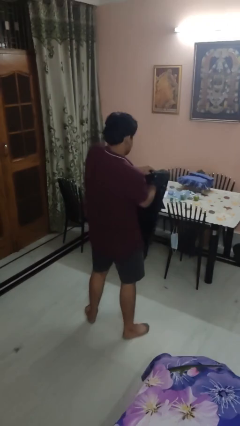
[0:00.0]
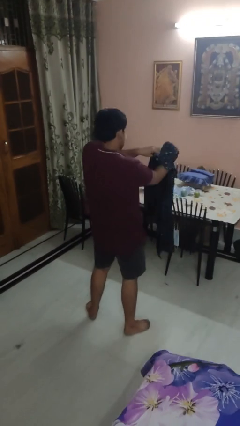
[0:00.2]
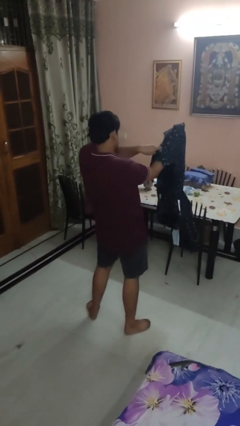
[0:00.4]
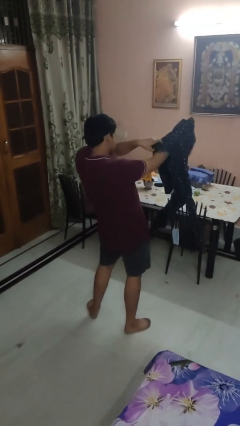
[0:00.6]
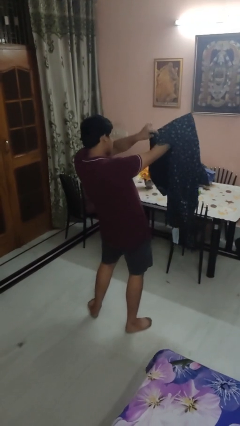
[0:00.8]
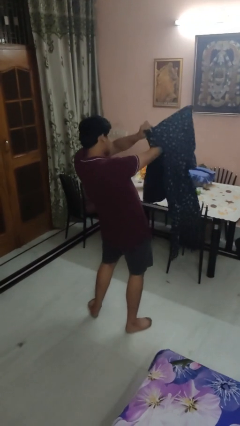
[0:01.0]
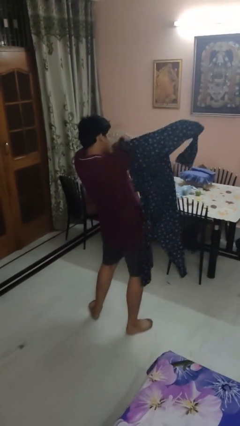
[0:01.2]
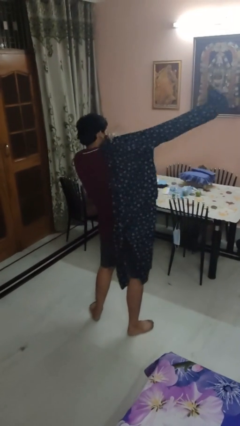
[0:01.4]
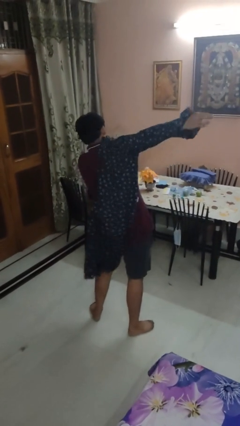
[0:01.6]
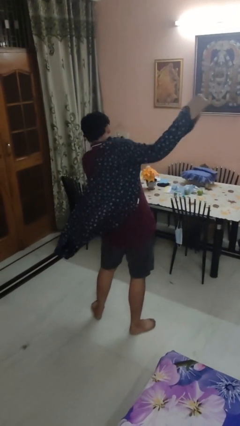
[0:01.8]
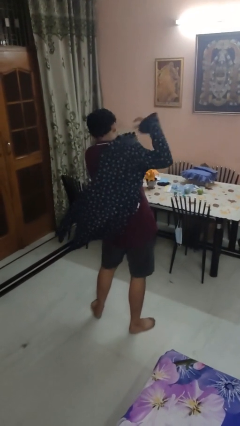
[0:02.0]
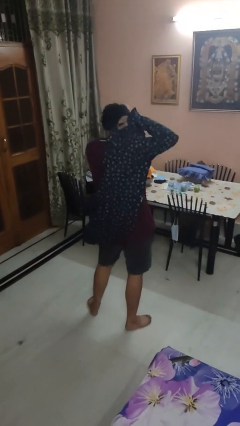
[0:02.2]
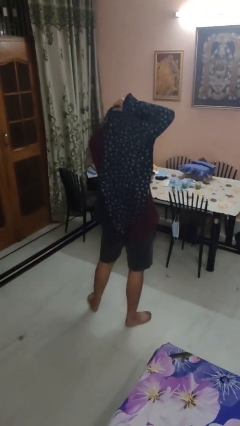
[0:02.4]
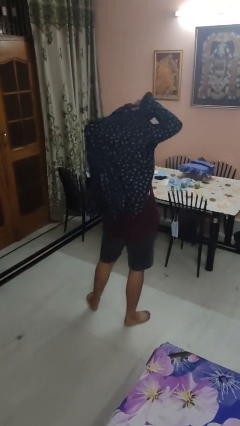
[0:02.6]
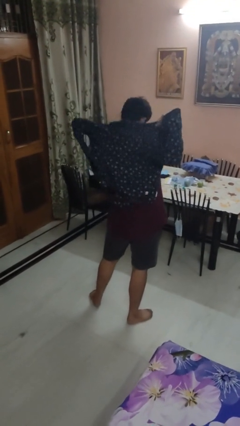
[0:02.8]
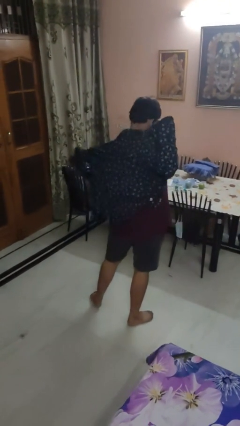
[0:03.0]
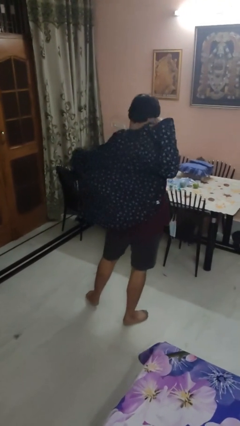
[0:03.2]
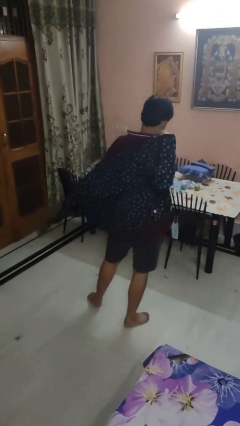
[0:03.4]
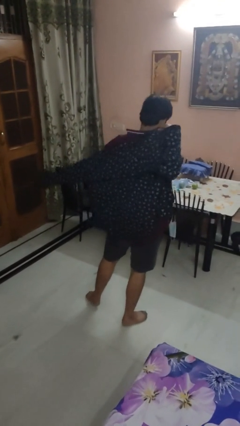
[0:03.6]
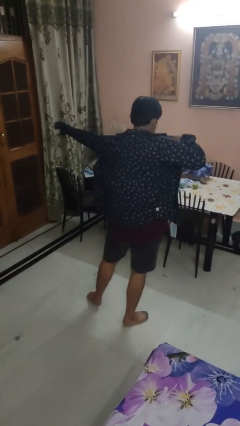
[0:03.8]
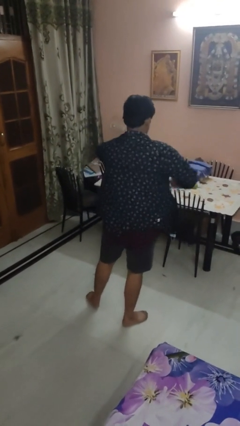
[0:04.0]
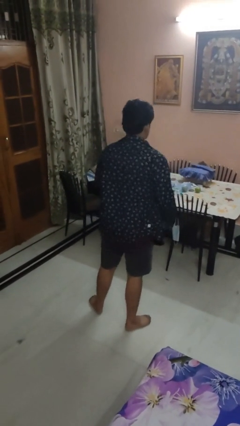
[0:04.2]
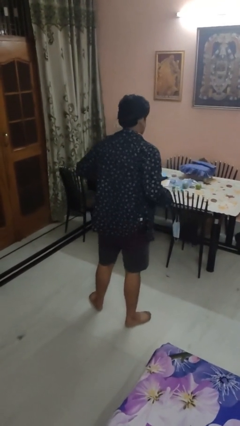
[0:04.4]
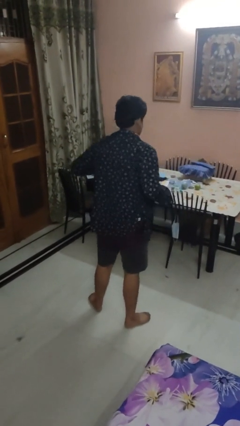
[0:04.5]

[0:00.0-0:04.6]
person puts on shirt

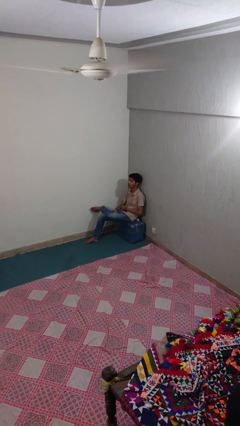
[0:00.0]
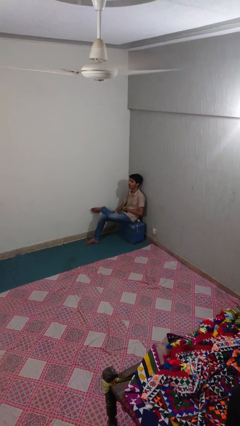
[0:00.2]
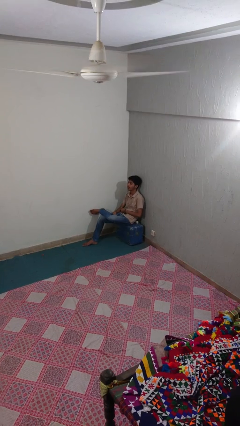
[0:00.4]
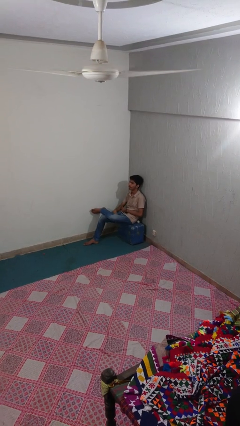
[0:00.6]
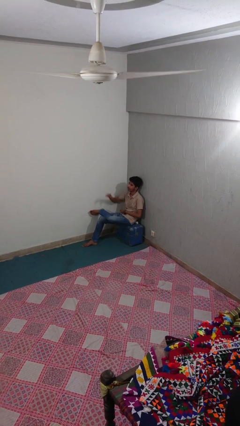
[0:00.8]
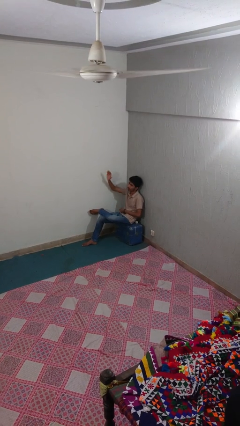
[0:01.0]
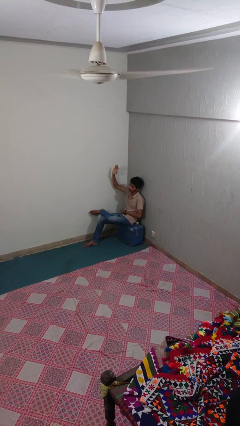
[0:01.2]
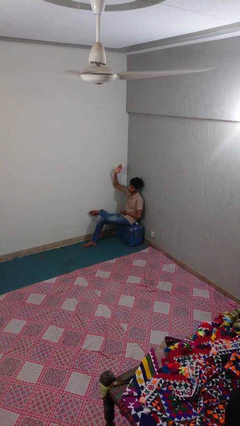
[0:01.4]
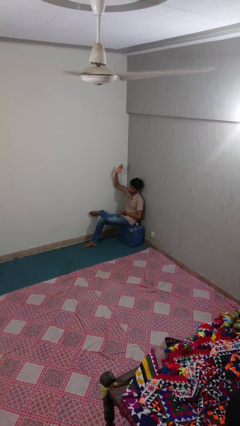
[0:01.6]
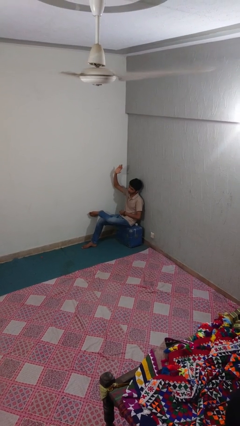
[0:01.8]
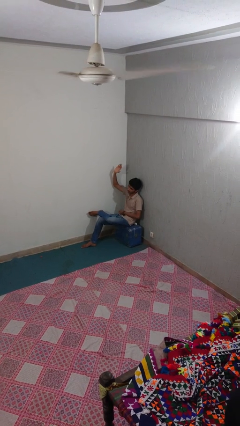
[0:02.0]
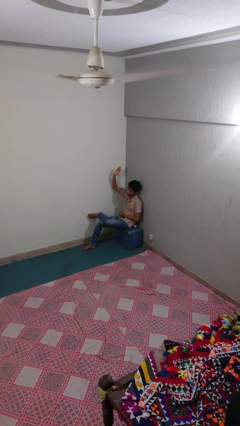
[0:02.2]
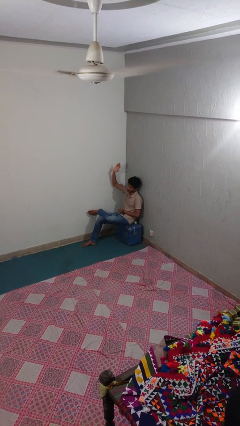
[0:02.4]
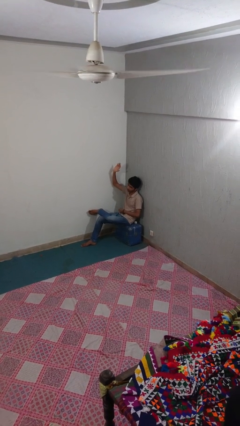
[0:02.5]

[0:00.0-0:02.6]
person gestures raise hand

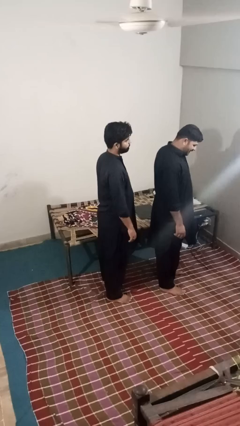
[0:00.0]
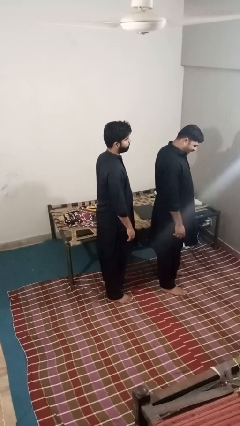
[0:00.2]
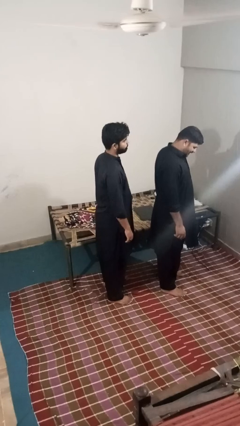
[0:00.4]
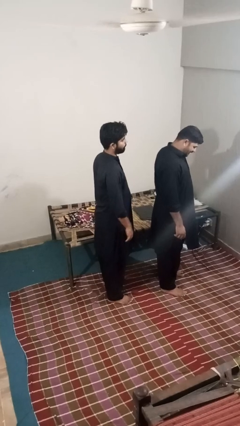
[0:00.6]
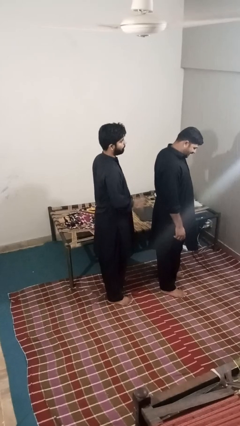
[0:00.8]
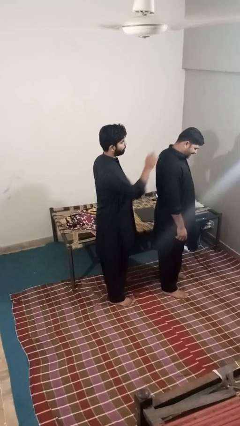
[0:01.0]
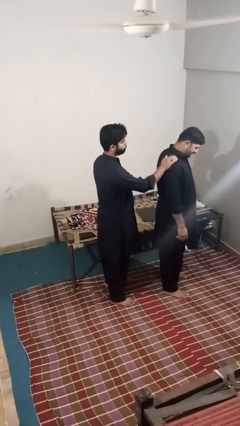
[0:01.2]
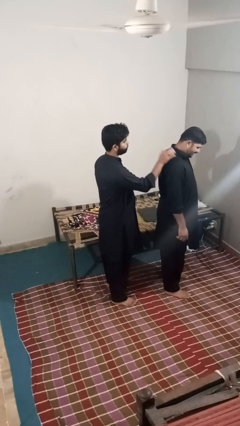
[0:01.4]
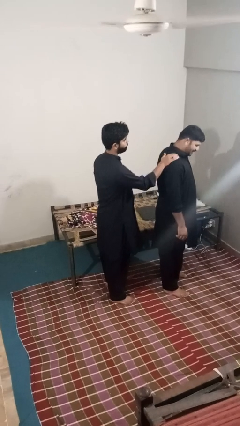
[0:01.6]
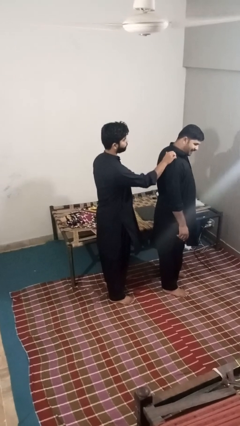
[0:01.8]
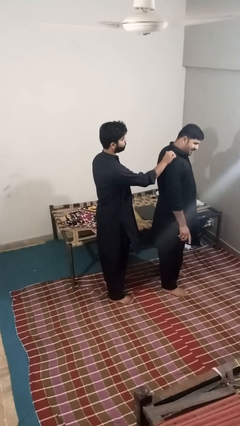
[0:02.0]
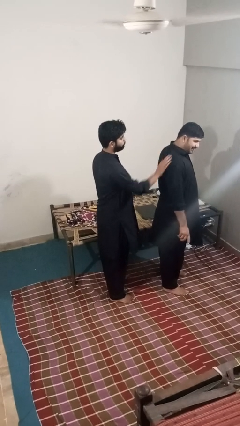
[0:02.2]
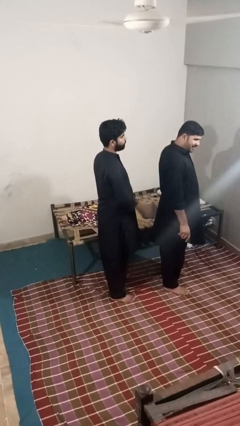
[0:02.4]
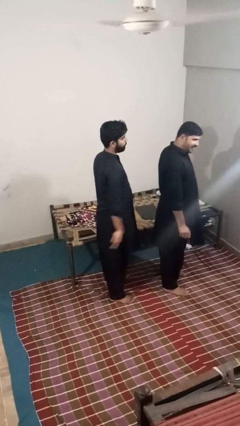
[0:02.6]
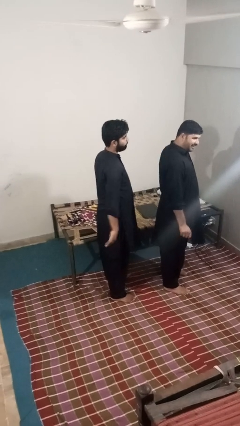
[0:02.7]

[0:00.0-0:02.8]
person touches face of person

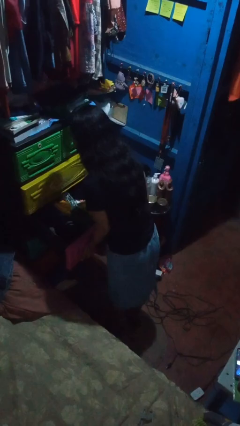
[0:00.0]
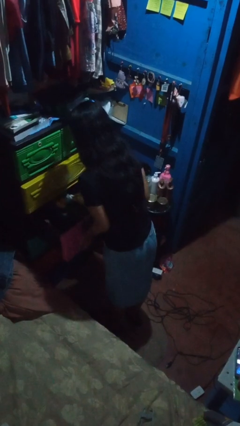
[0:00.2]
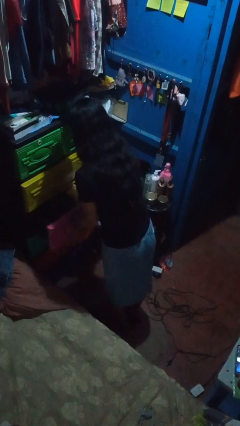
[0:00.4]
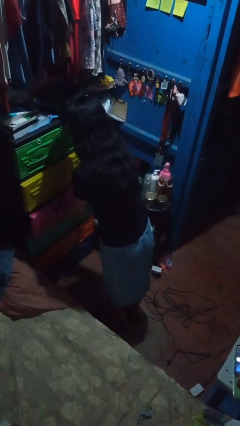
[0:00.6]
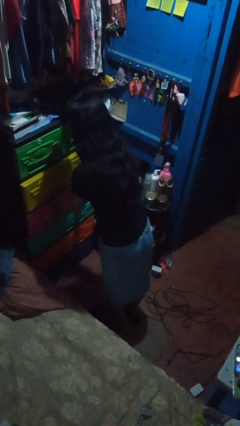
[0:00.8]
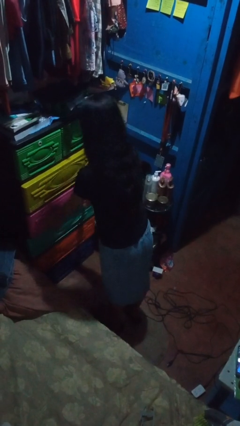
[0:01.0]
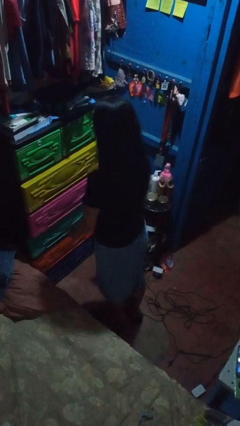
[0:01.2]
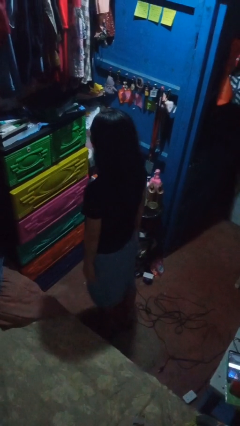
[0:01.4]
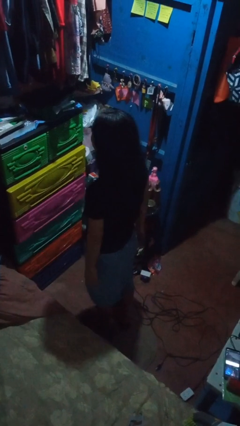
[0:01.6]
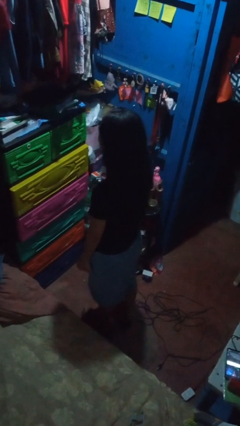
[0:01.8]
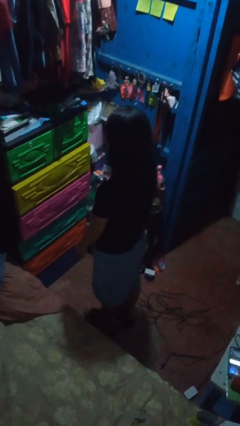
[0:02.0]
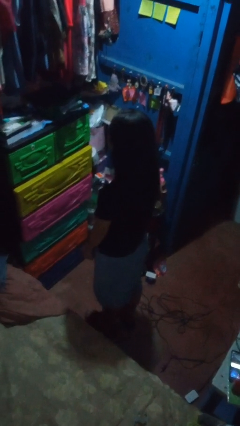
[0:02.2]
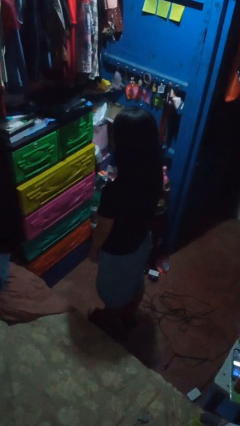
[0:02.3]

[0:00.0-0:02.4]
person closes dresser drawer

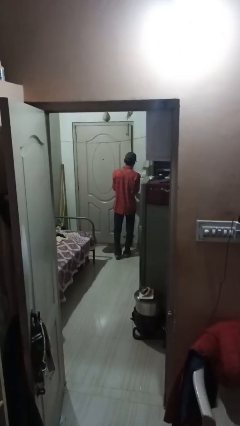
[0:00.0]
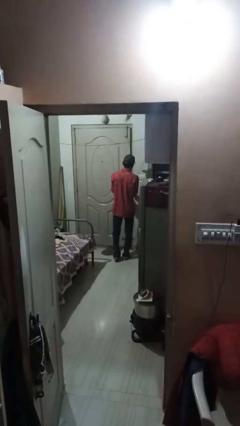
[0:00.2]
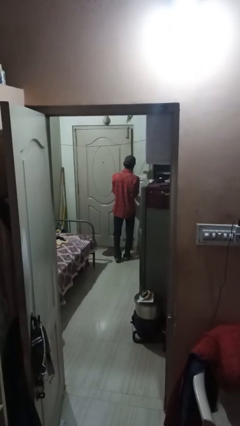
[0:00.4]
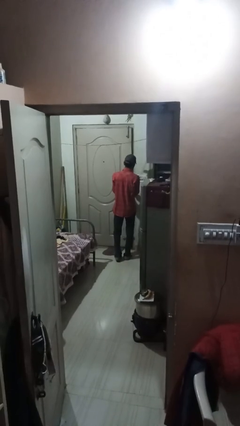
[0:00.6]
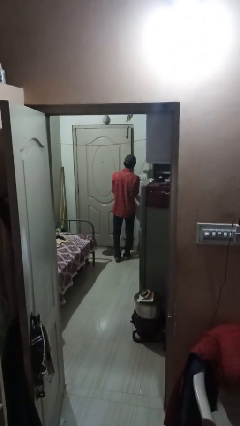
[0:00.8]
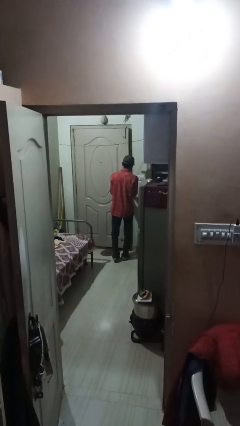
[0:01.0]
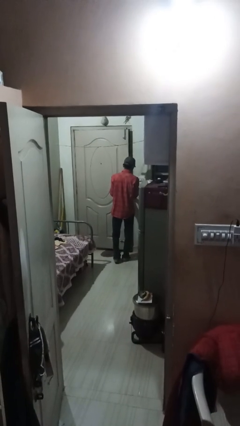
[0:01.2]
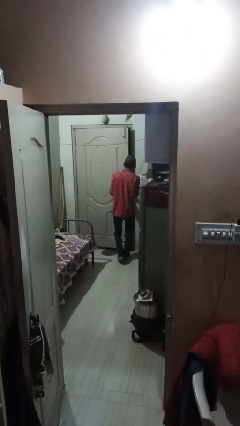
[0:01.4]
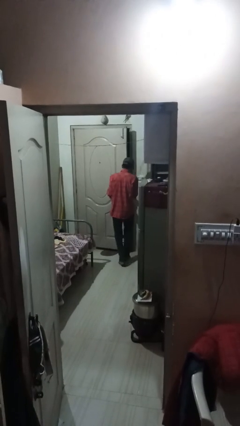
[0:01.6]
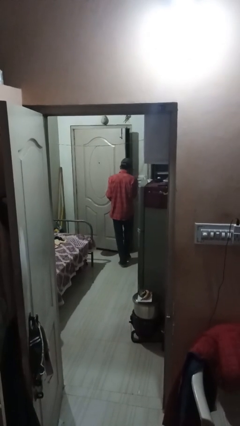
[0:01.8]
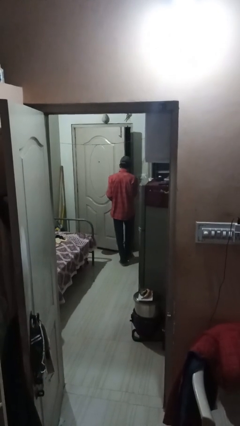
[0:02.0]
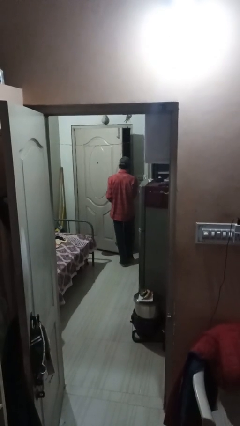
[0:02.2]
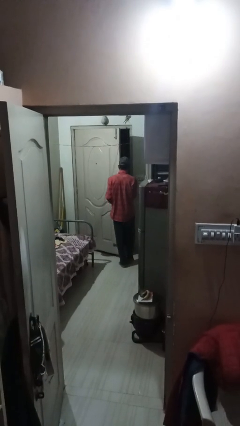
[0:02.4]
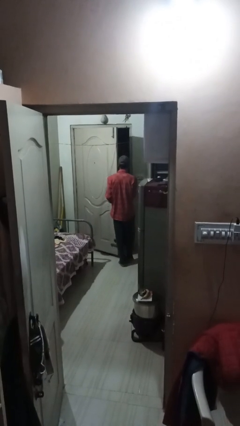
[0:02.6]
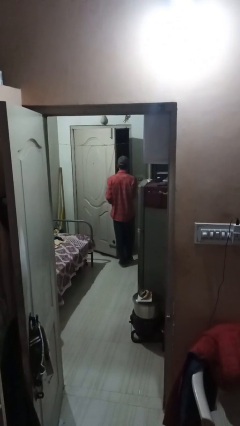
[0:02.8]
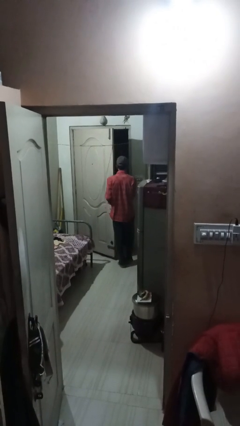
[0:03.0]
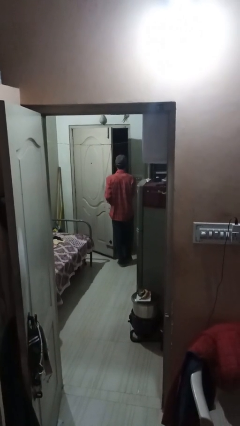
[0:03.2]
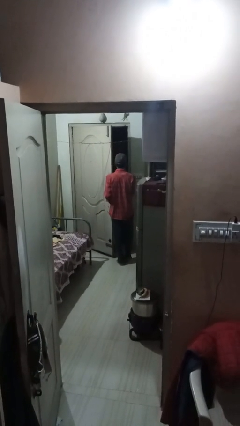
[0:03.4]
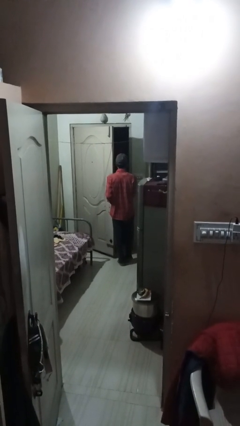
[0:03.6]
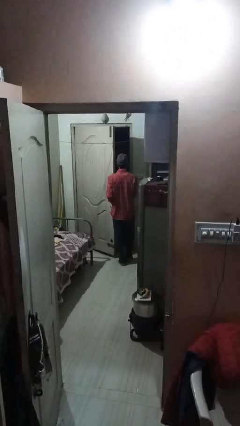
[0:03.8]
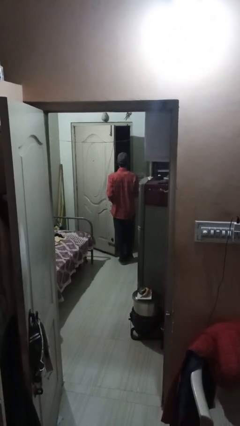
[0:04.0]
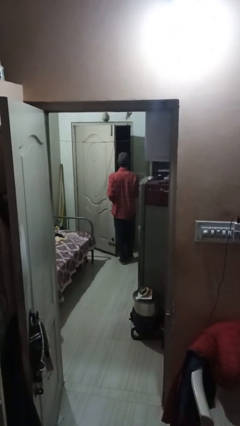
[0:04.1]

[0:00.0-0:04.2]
person opens facility door

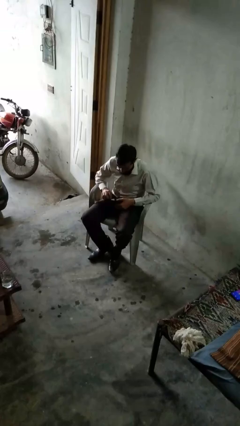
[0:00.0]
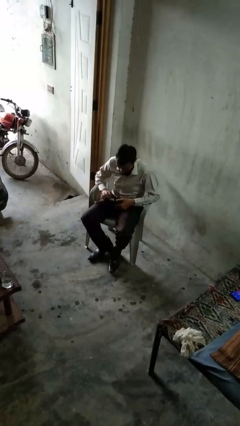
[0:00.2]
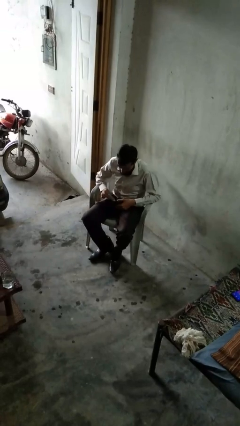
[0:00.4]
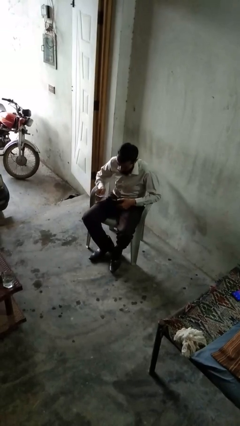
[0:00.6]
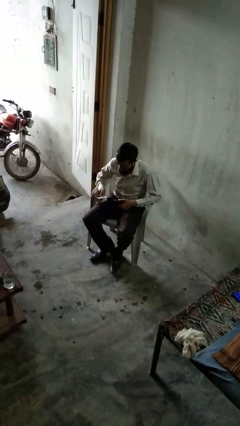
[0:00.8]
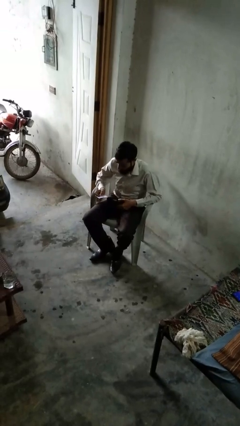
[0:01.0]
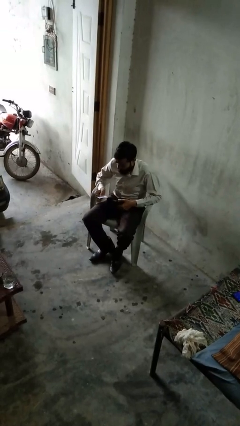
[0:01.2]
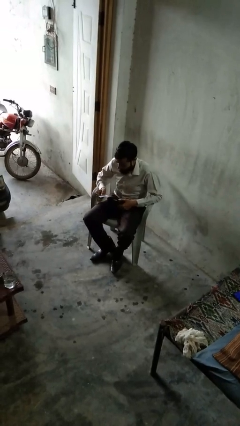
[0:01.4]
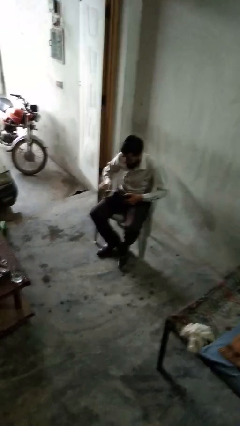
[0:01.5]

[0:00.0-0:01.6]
person takes object from purse
